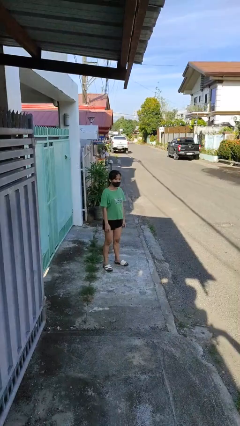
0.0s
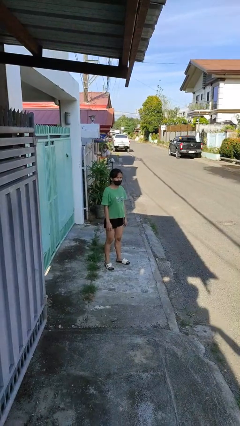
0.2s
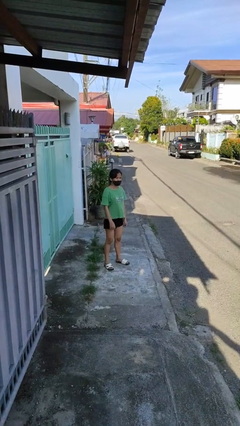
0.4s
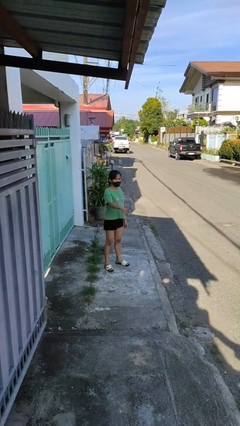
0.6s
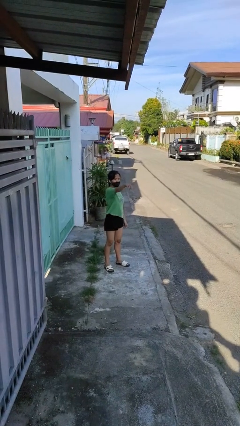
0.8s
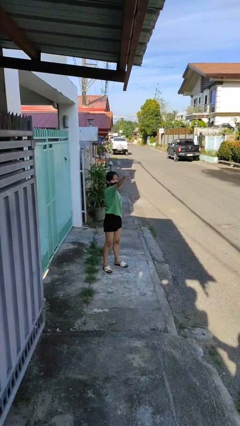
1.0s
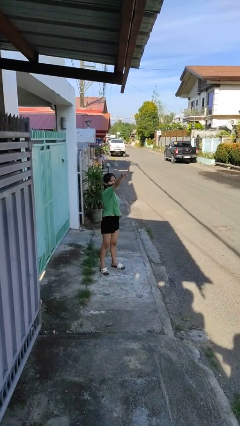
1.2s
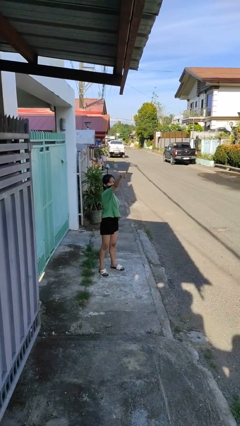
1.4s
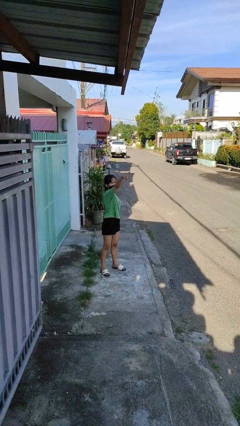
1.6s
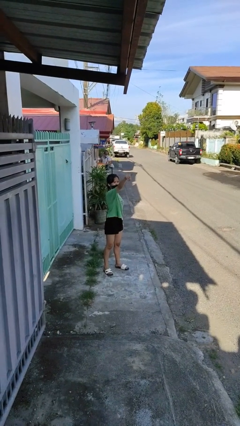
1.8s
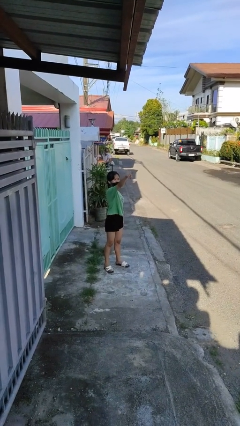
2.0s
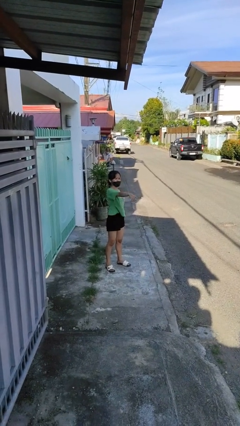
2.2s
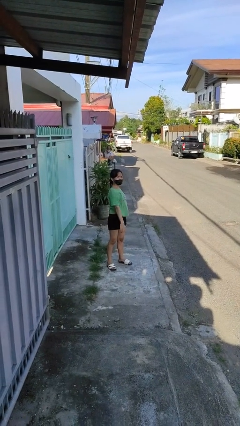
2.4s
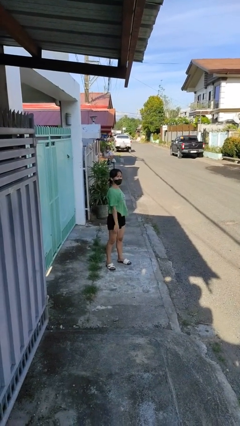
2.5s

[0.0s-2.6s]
person points at person

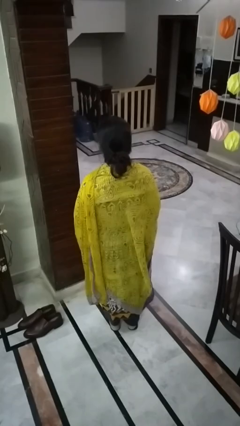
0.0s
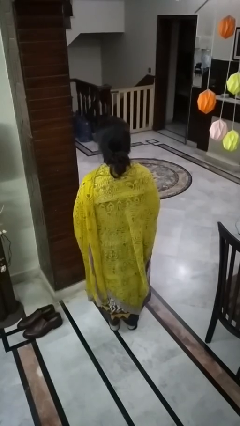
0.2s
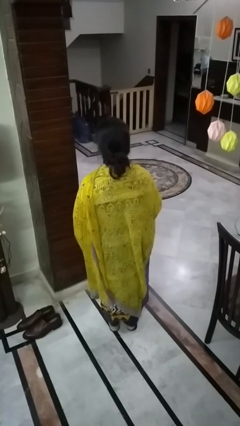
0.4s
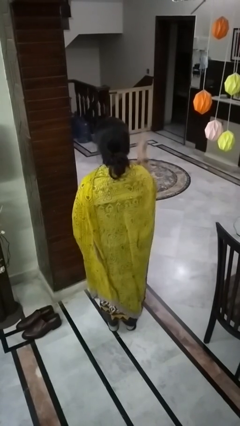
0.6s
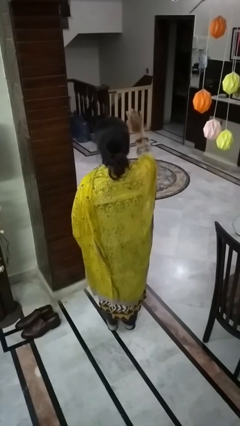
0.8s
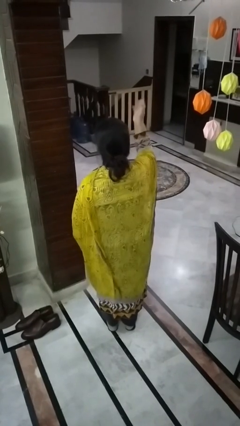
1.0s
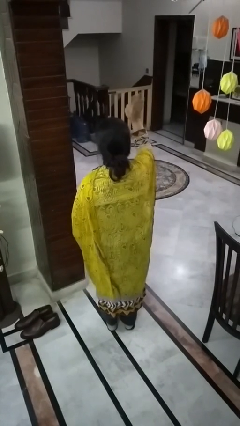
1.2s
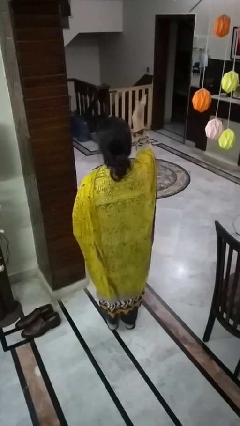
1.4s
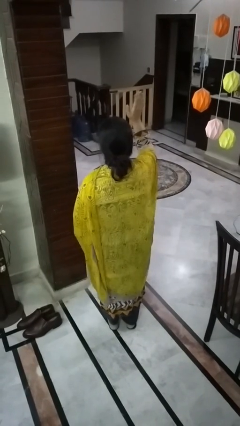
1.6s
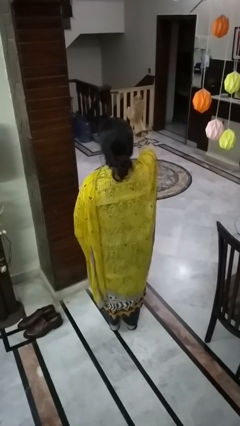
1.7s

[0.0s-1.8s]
person waves at person

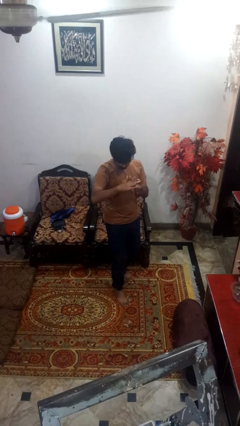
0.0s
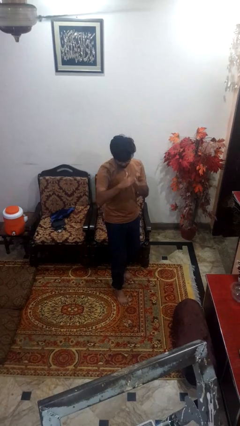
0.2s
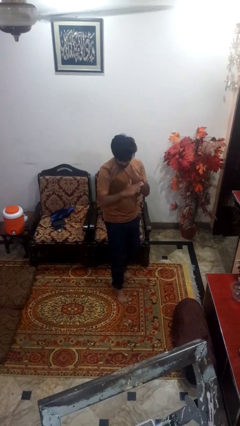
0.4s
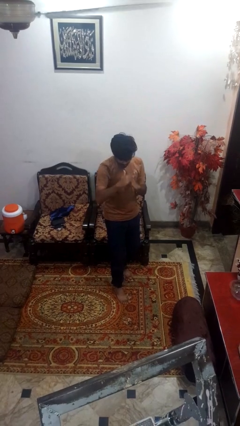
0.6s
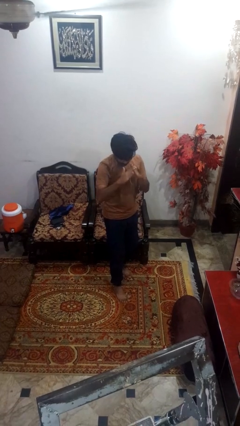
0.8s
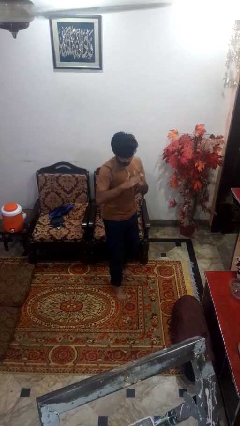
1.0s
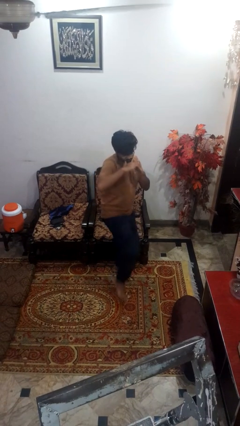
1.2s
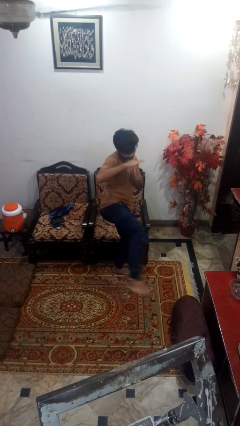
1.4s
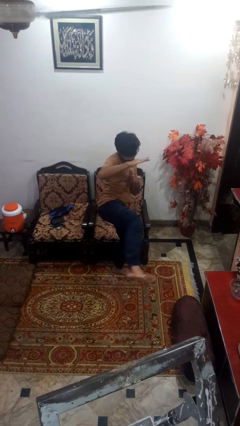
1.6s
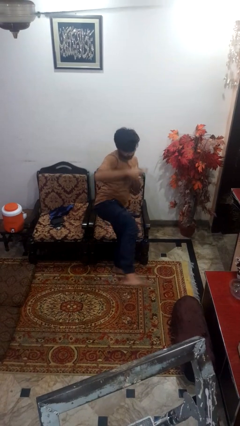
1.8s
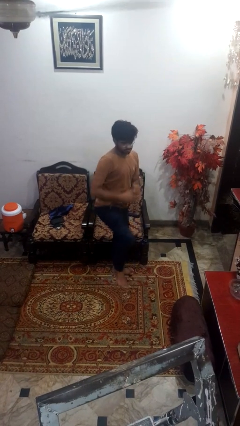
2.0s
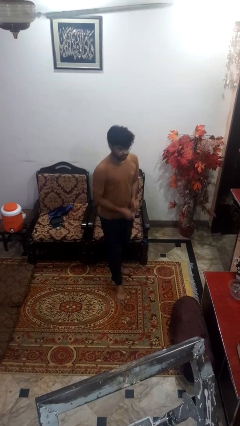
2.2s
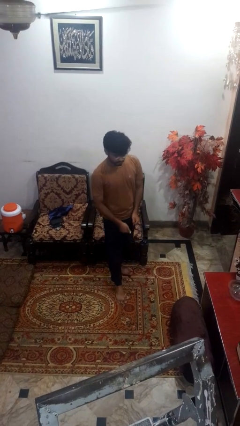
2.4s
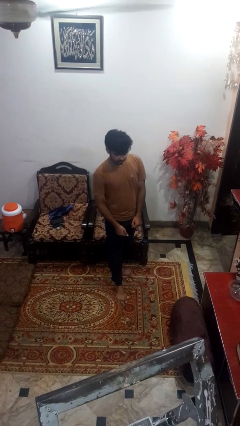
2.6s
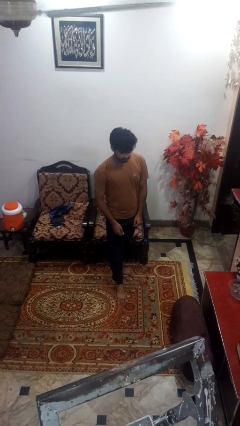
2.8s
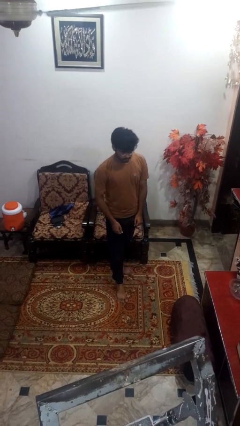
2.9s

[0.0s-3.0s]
person karate kicks

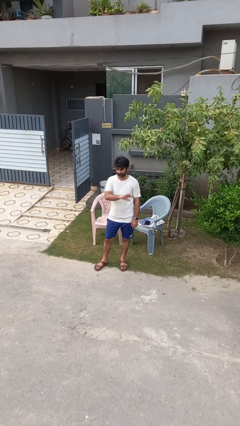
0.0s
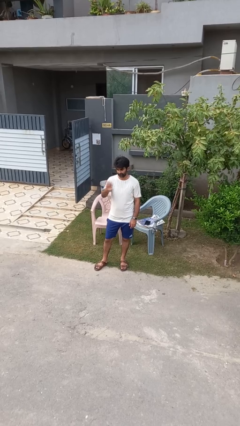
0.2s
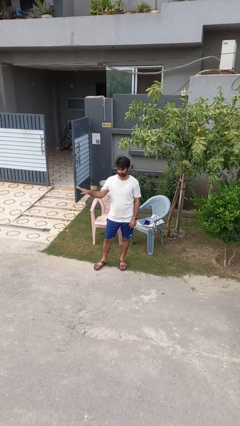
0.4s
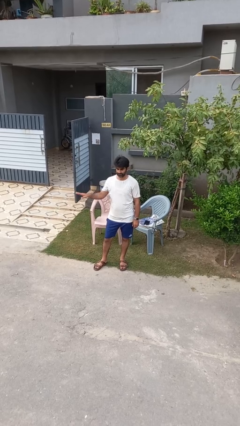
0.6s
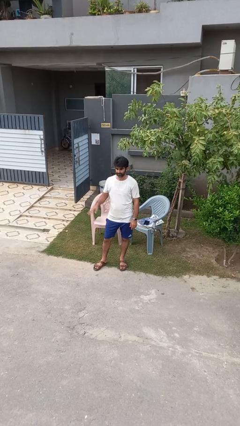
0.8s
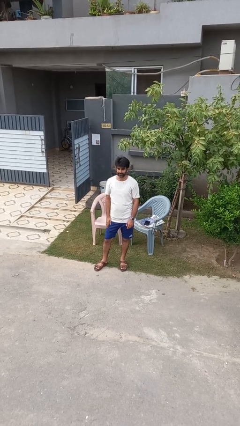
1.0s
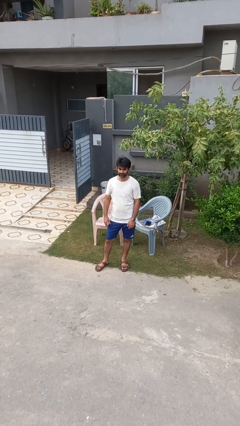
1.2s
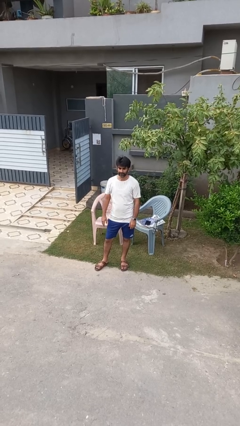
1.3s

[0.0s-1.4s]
person gestures swipe right

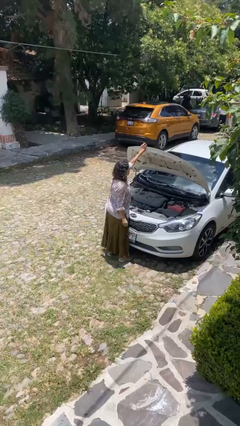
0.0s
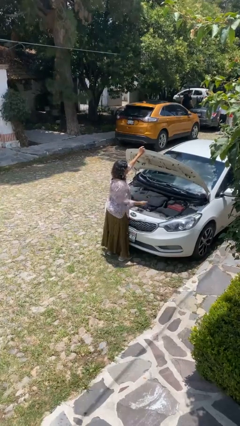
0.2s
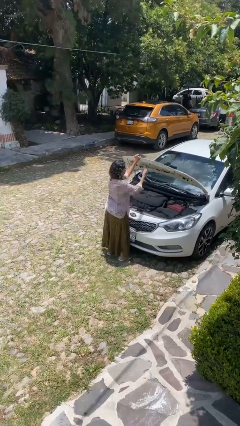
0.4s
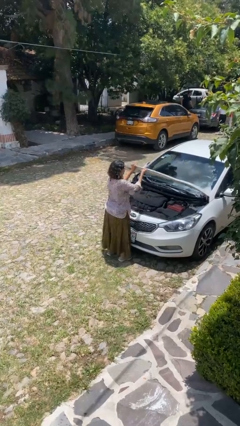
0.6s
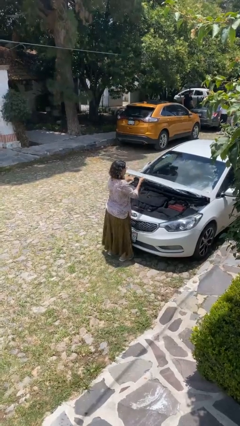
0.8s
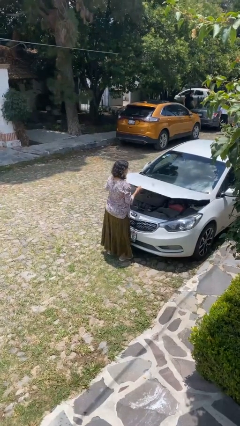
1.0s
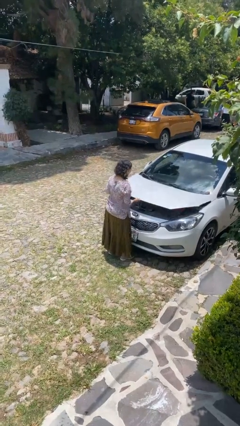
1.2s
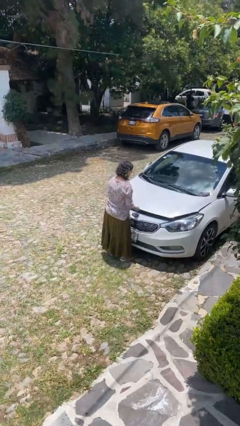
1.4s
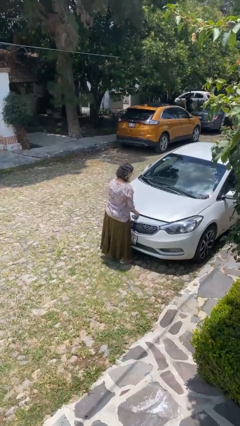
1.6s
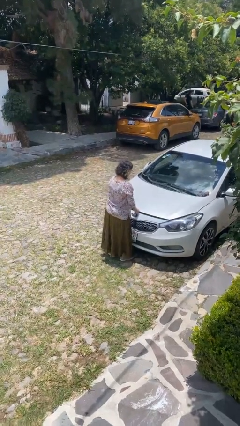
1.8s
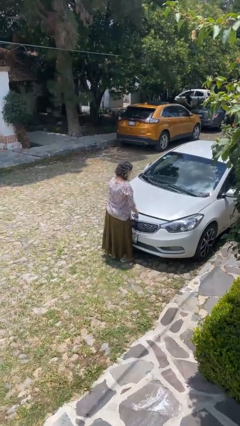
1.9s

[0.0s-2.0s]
person closes car hood

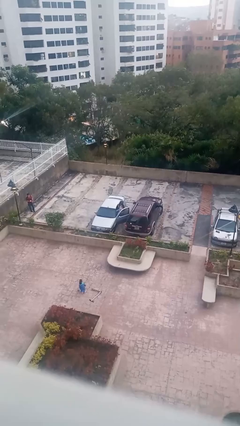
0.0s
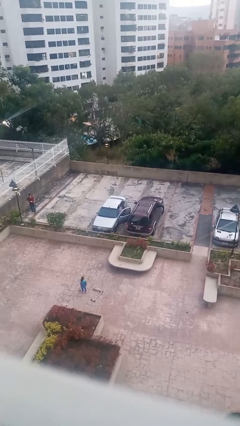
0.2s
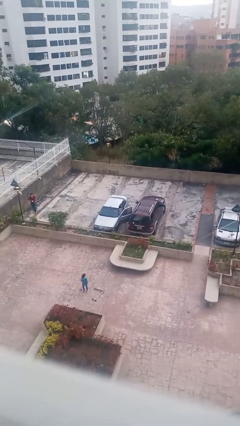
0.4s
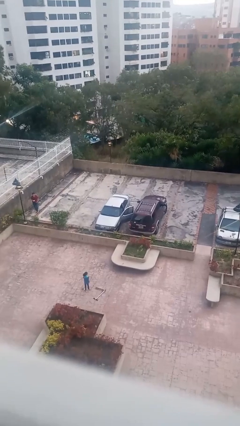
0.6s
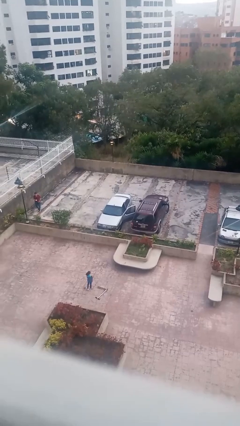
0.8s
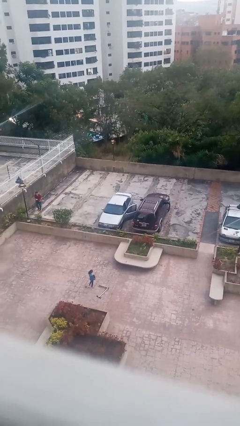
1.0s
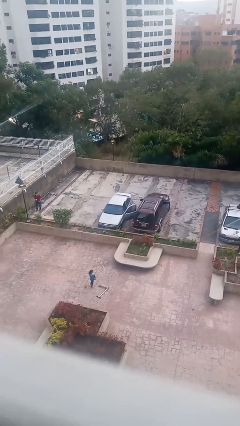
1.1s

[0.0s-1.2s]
person enters car

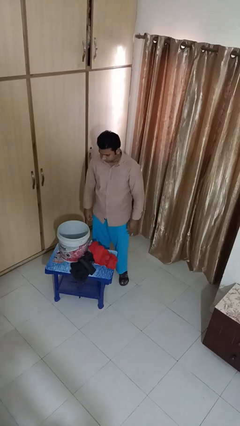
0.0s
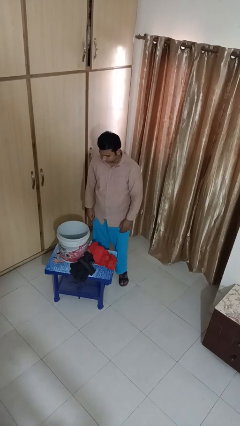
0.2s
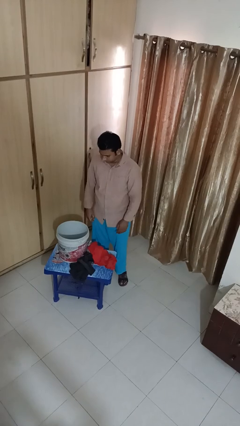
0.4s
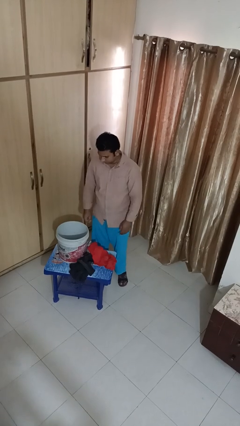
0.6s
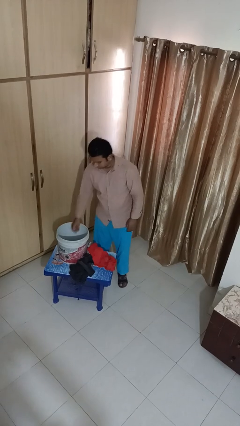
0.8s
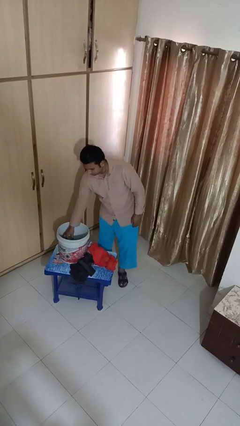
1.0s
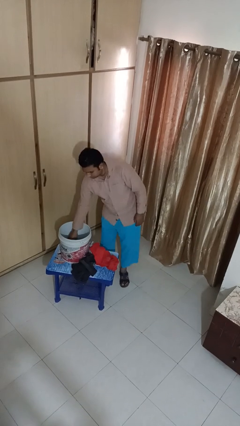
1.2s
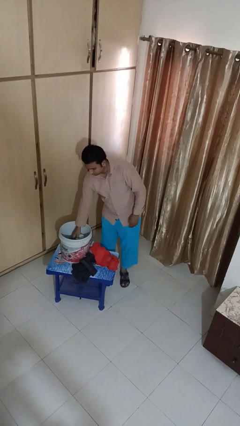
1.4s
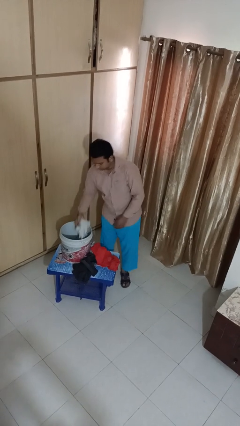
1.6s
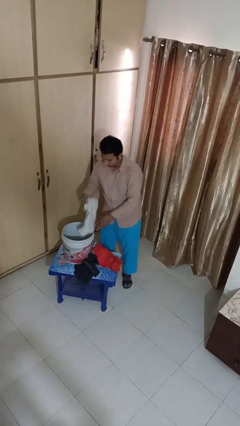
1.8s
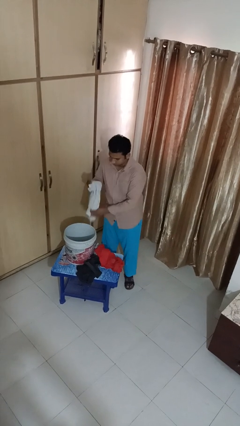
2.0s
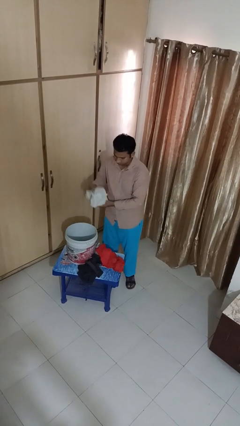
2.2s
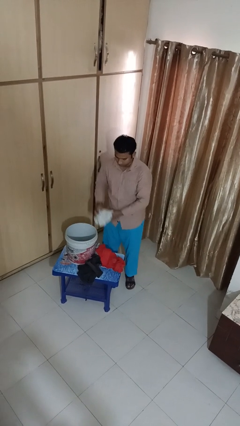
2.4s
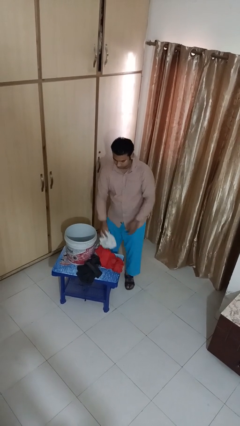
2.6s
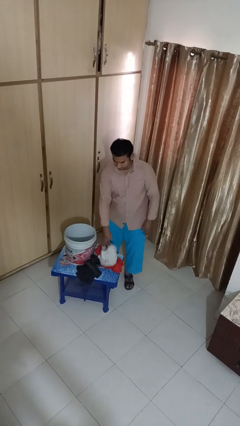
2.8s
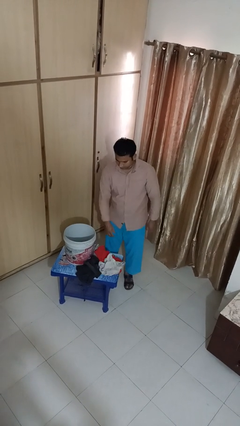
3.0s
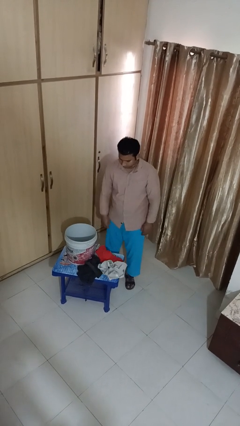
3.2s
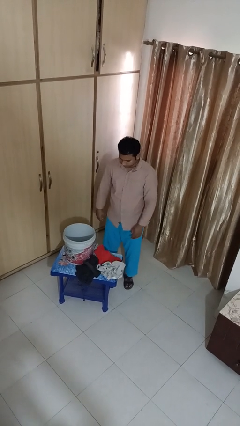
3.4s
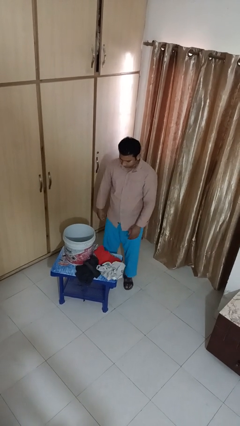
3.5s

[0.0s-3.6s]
person takes object from basket

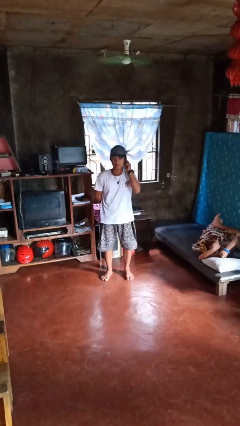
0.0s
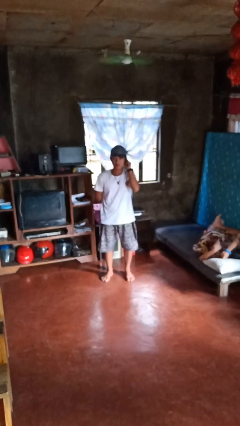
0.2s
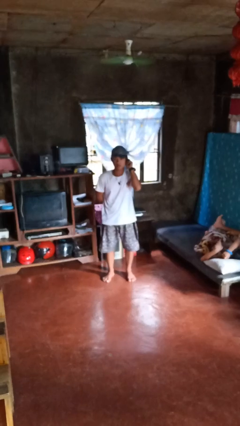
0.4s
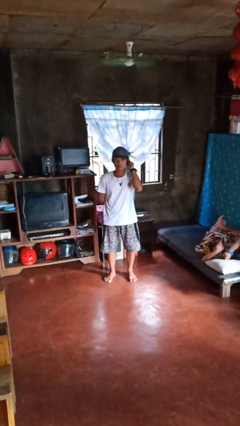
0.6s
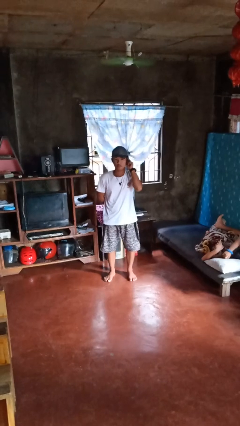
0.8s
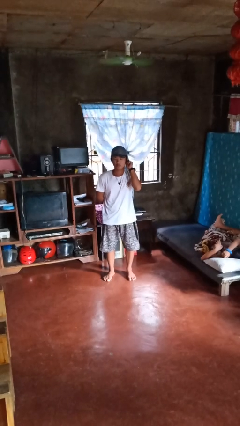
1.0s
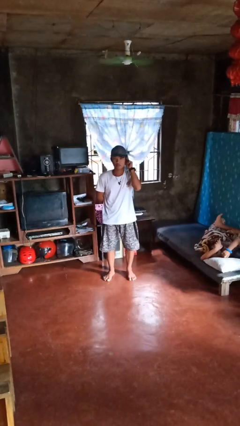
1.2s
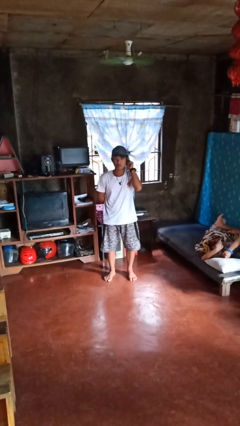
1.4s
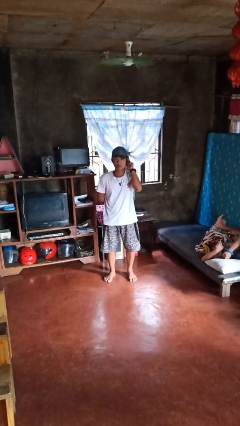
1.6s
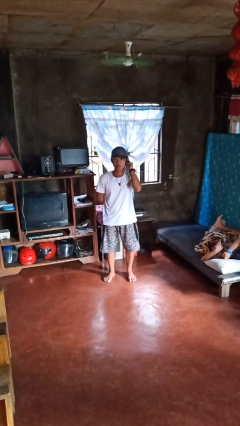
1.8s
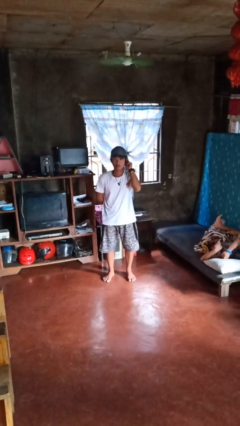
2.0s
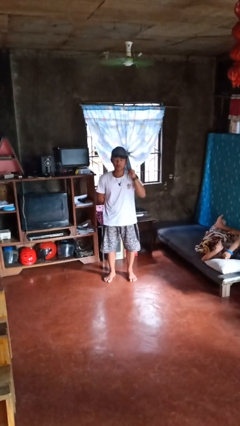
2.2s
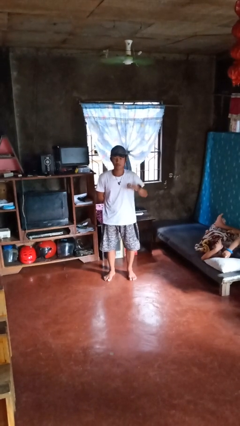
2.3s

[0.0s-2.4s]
person touches earlobe
